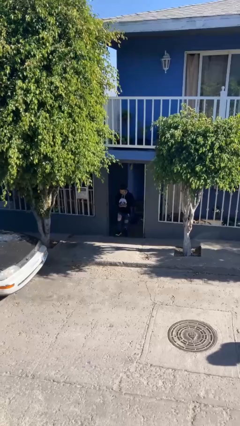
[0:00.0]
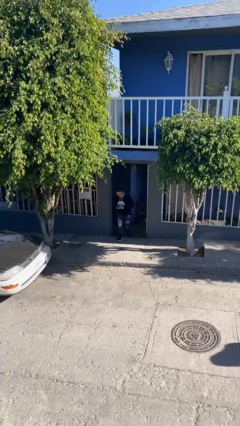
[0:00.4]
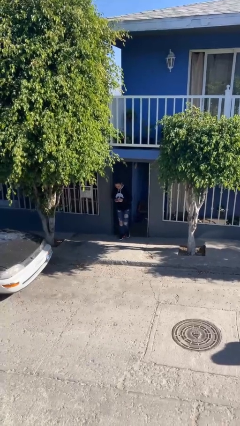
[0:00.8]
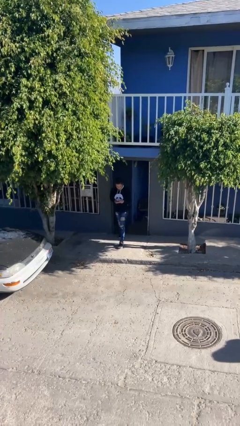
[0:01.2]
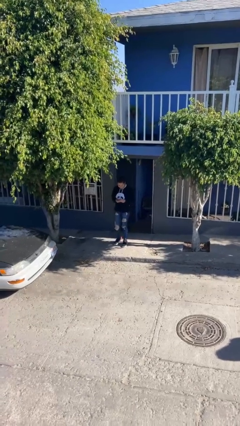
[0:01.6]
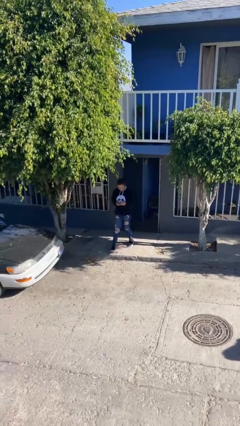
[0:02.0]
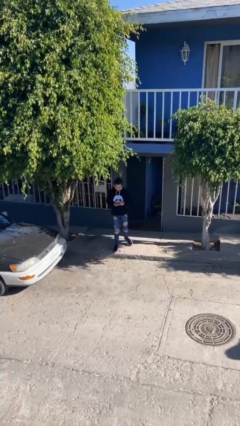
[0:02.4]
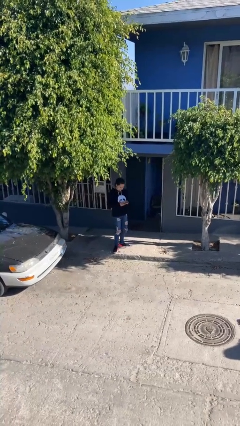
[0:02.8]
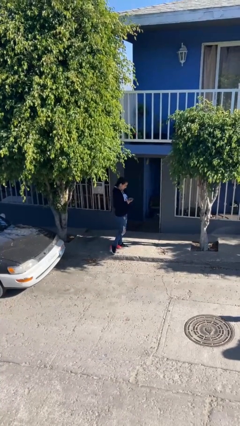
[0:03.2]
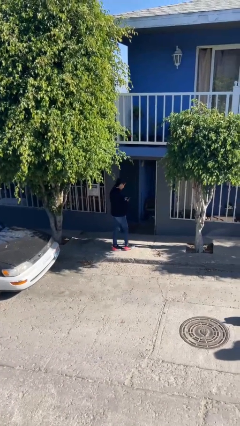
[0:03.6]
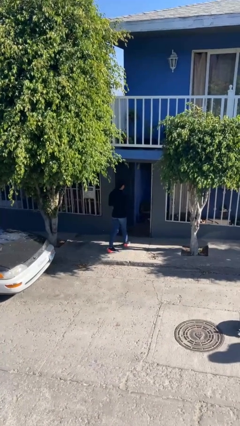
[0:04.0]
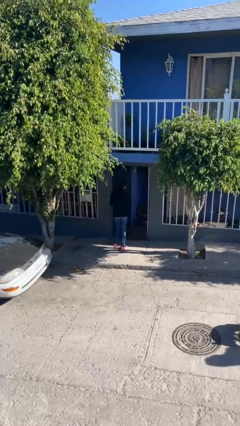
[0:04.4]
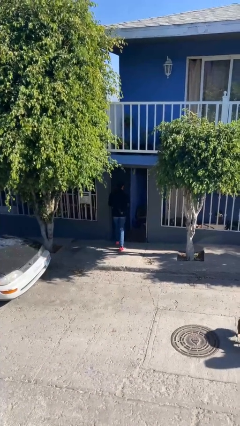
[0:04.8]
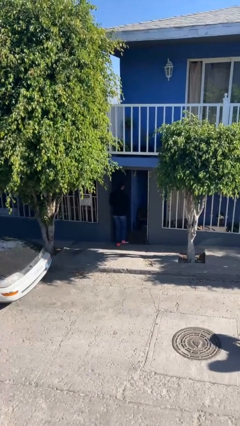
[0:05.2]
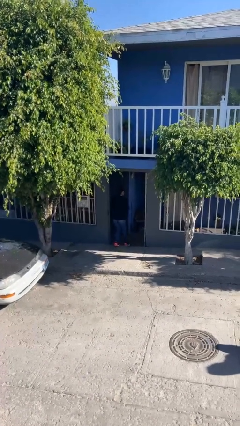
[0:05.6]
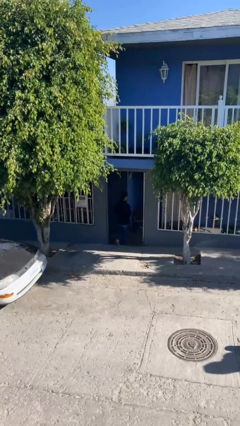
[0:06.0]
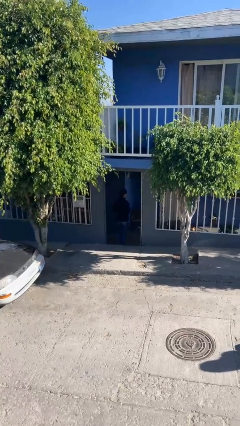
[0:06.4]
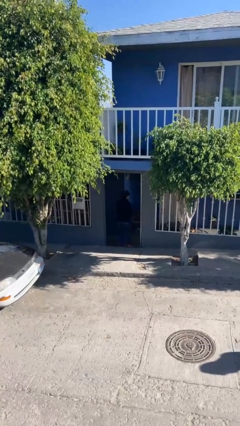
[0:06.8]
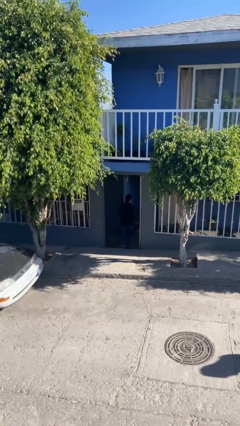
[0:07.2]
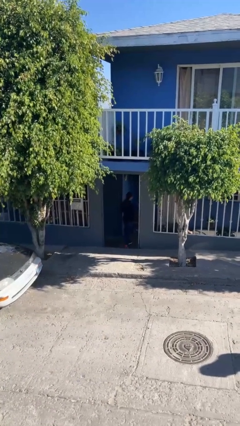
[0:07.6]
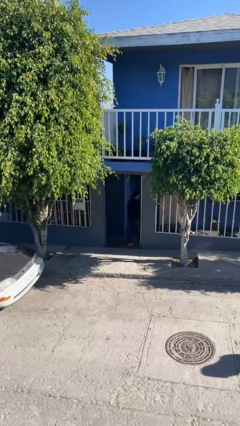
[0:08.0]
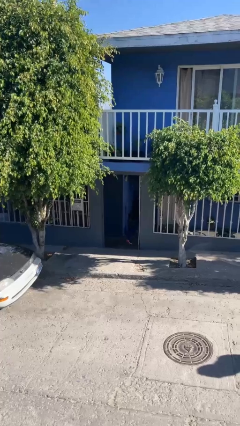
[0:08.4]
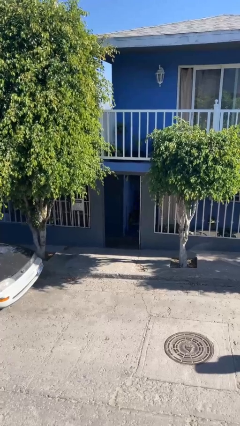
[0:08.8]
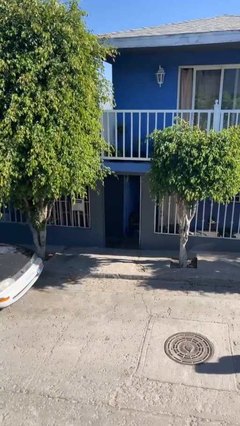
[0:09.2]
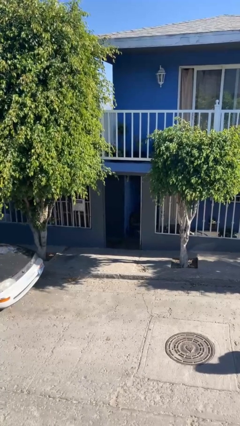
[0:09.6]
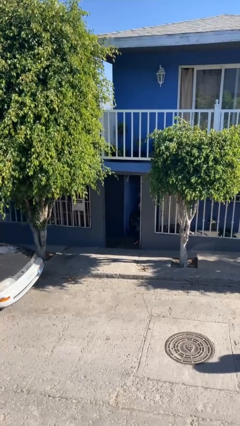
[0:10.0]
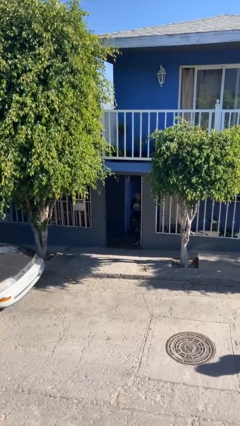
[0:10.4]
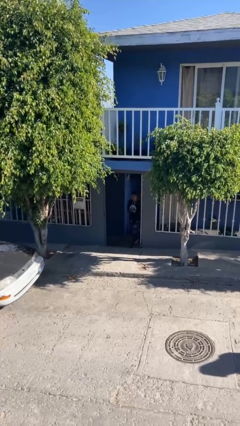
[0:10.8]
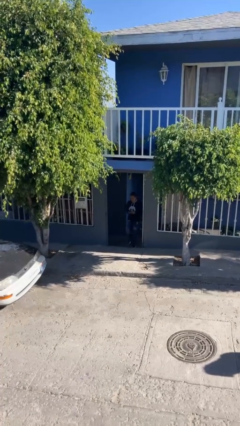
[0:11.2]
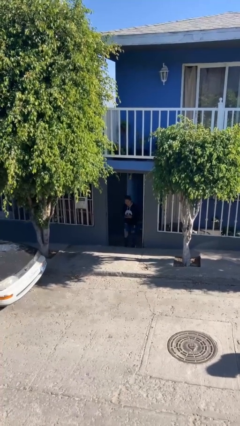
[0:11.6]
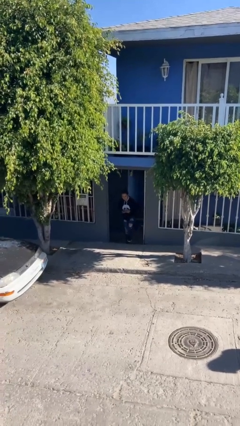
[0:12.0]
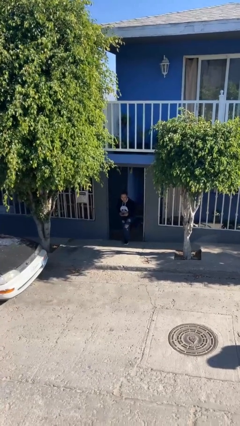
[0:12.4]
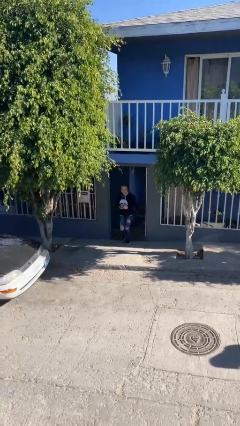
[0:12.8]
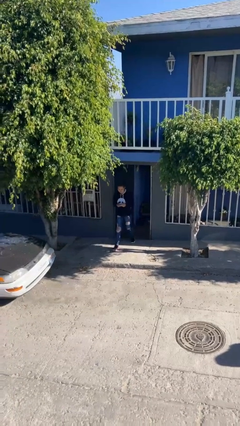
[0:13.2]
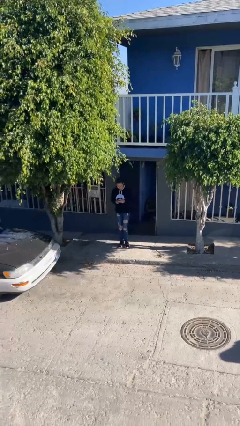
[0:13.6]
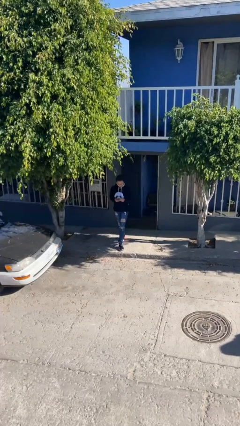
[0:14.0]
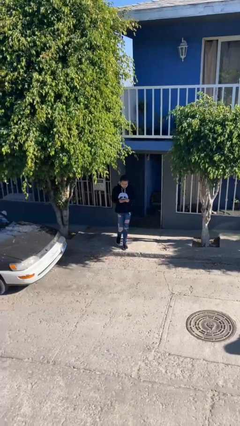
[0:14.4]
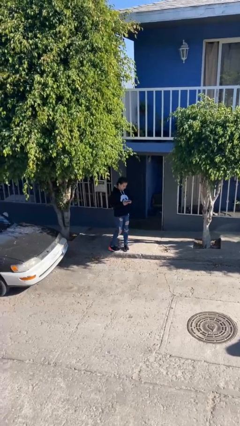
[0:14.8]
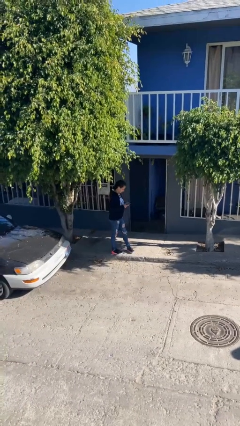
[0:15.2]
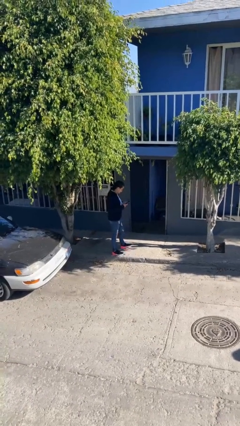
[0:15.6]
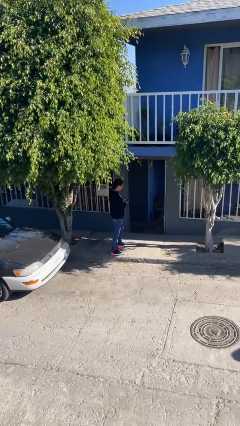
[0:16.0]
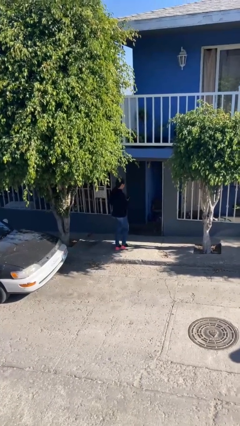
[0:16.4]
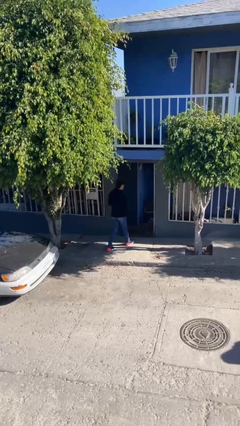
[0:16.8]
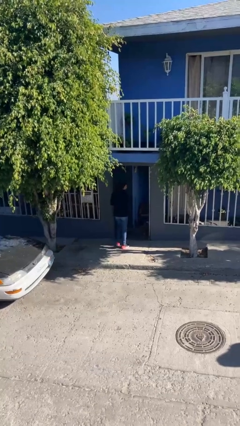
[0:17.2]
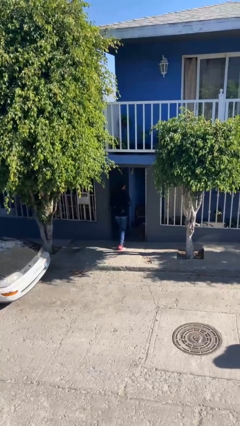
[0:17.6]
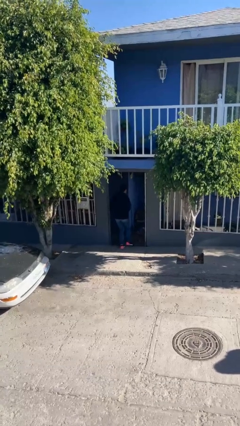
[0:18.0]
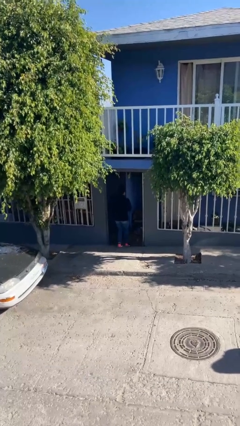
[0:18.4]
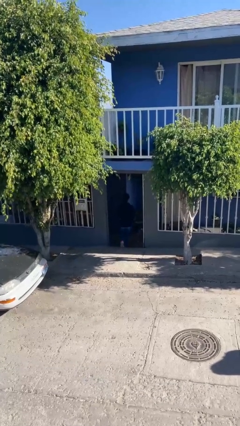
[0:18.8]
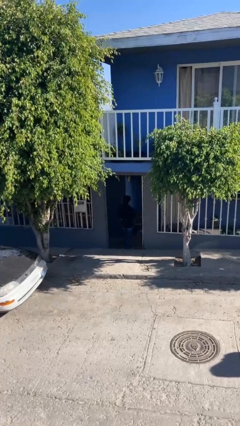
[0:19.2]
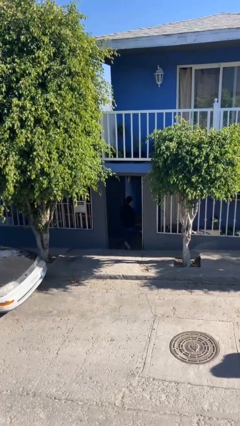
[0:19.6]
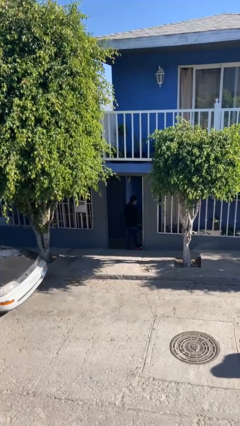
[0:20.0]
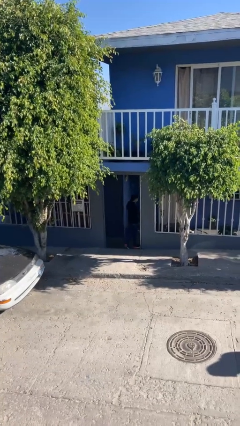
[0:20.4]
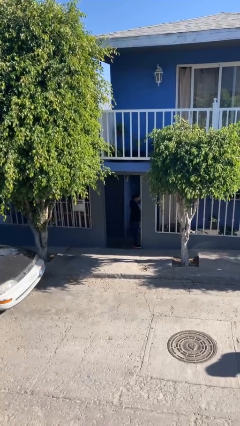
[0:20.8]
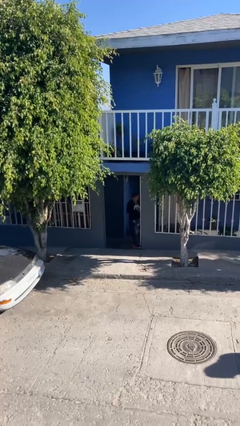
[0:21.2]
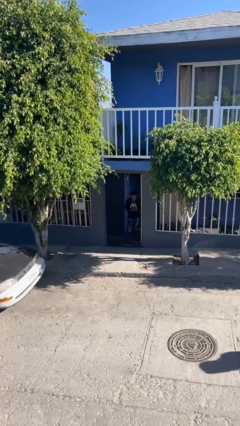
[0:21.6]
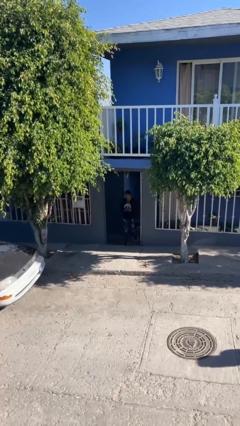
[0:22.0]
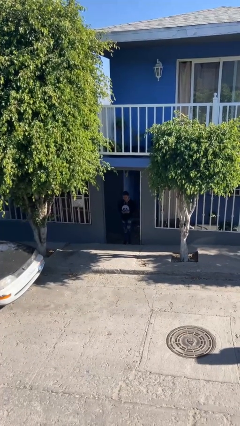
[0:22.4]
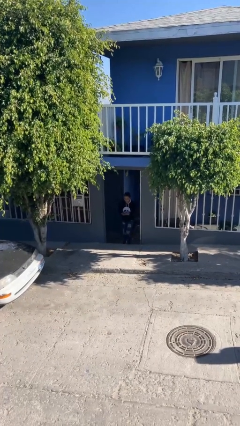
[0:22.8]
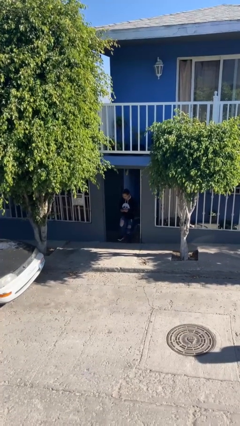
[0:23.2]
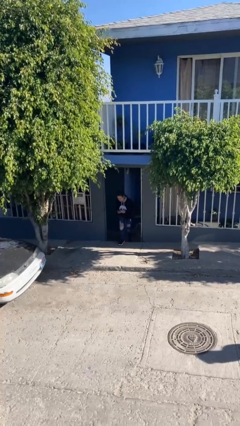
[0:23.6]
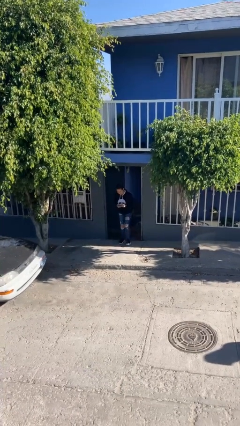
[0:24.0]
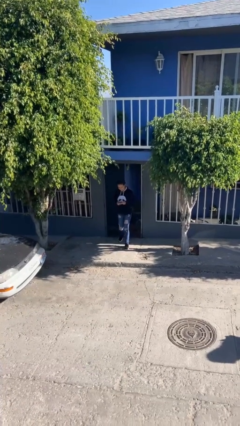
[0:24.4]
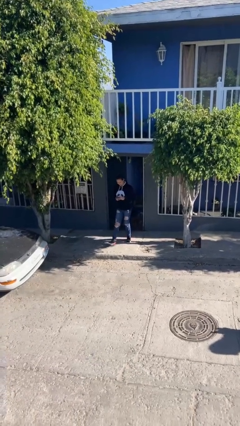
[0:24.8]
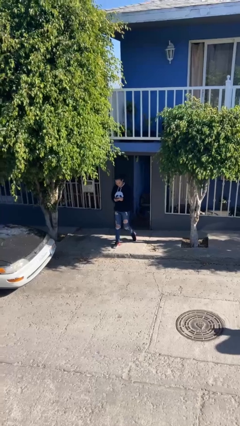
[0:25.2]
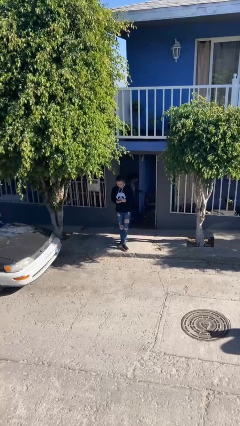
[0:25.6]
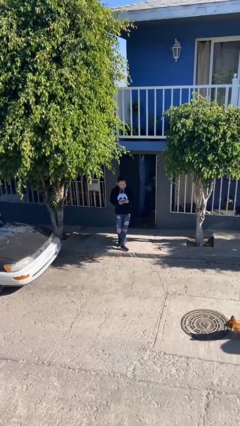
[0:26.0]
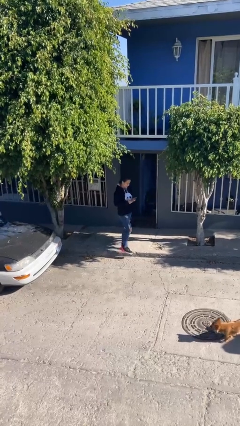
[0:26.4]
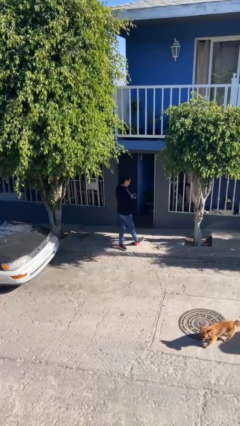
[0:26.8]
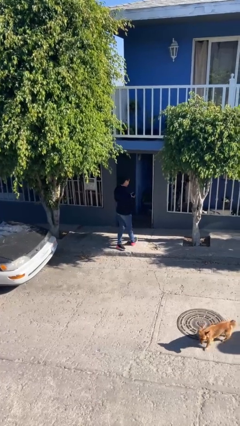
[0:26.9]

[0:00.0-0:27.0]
person texts on phone

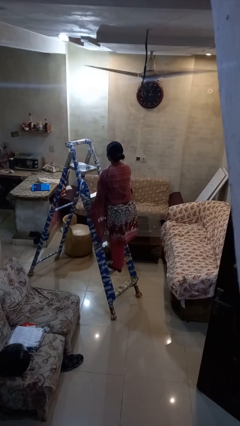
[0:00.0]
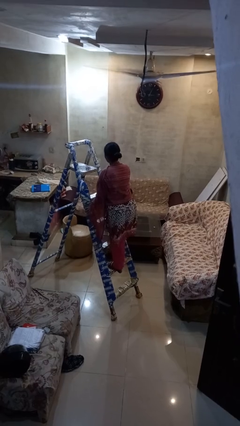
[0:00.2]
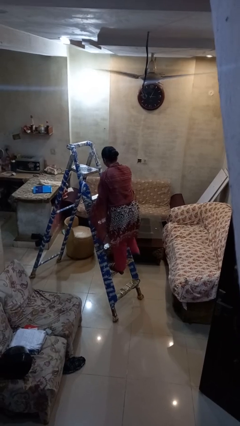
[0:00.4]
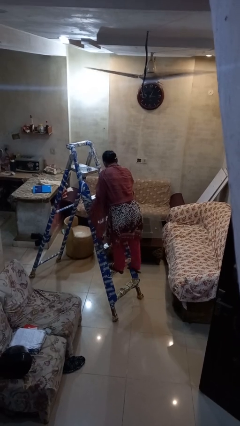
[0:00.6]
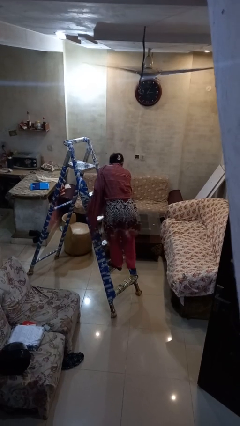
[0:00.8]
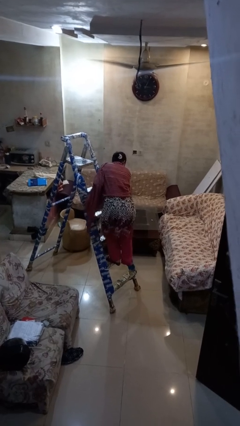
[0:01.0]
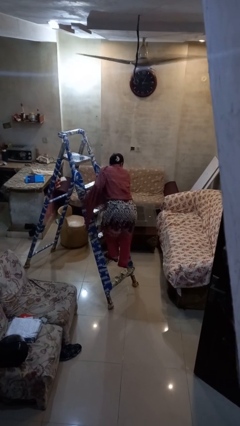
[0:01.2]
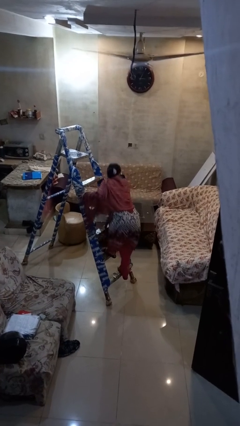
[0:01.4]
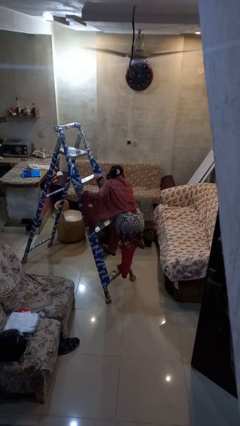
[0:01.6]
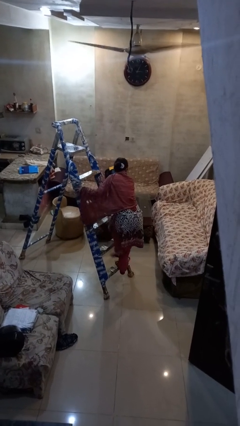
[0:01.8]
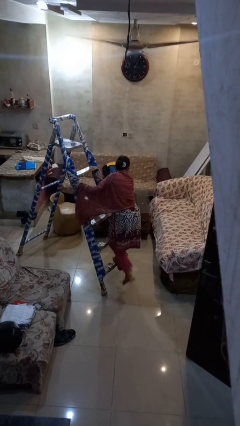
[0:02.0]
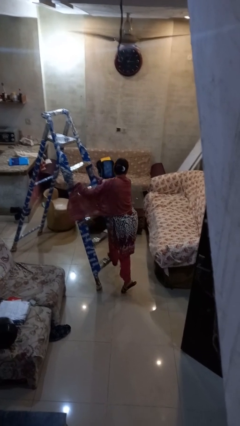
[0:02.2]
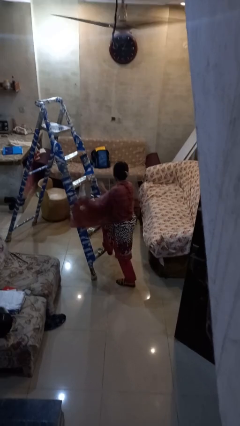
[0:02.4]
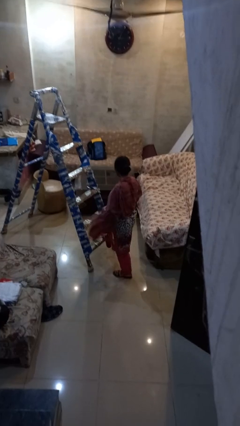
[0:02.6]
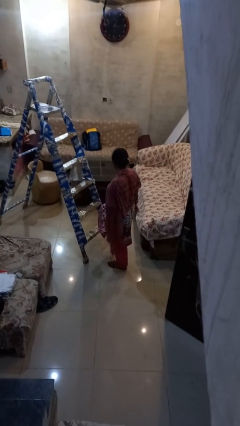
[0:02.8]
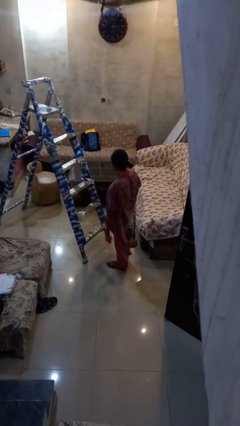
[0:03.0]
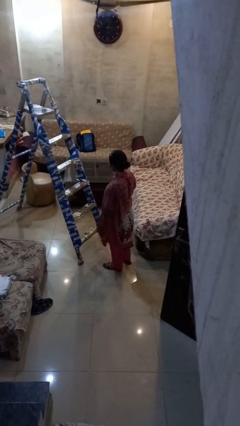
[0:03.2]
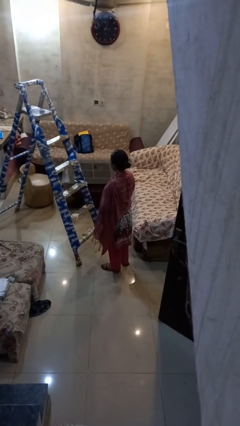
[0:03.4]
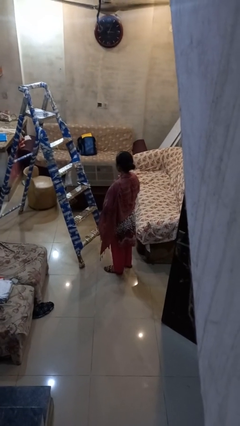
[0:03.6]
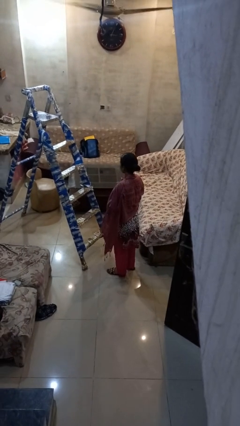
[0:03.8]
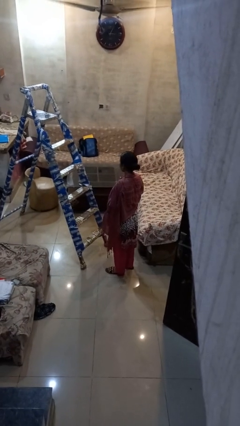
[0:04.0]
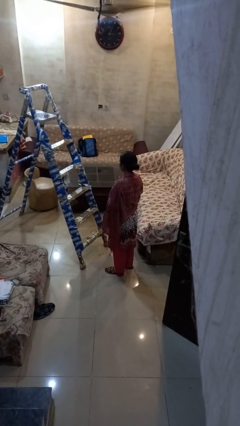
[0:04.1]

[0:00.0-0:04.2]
person climbs down ladder
